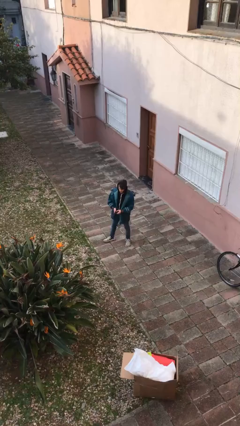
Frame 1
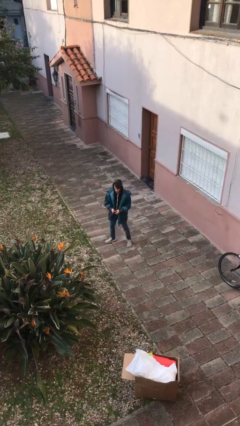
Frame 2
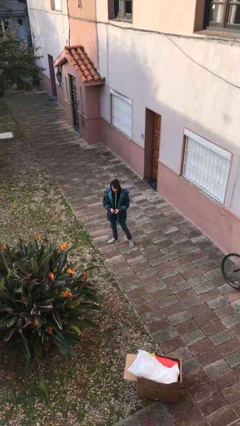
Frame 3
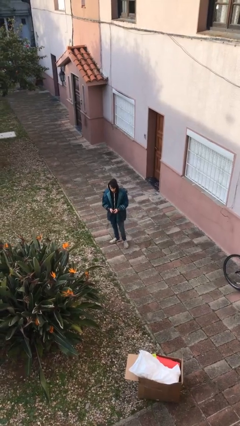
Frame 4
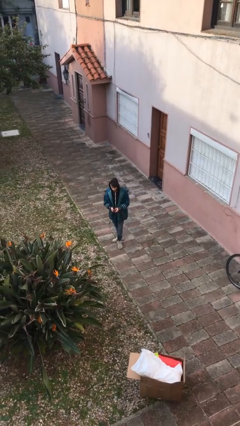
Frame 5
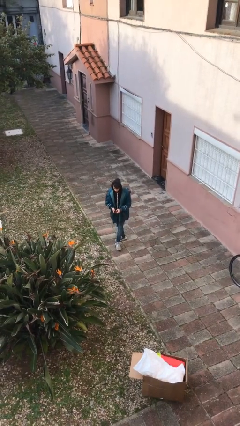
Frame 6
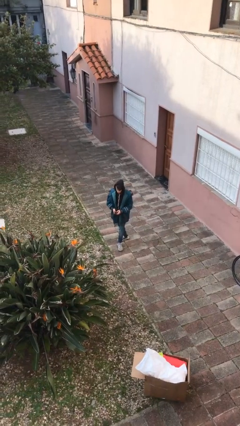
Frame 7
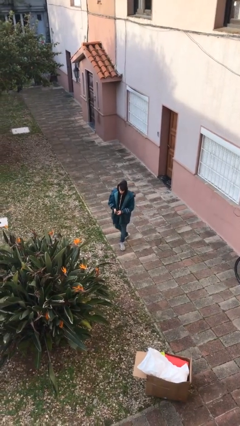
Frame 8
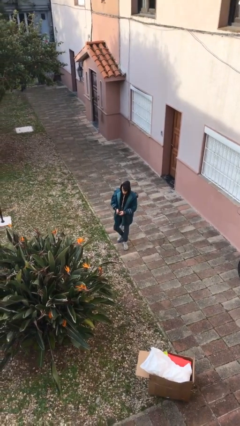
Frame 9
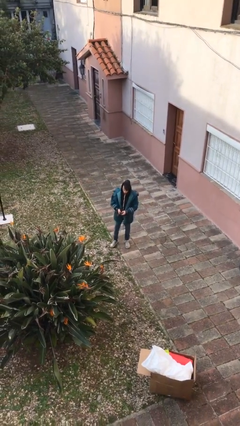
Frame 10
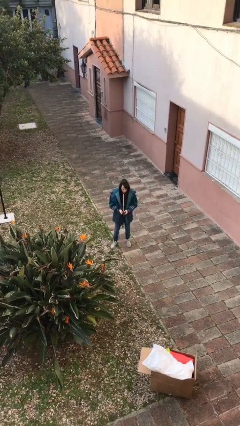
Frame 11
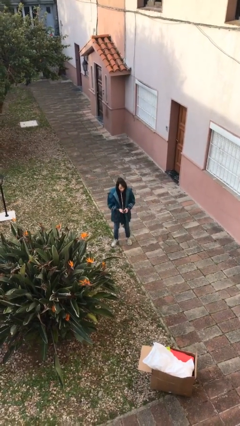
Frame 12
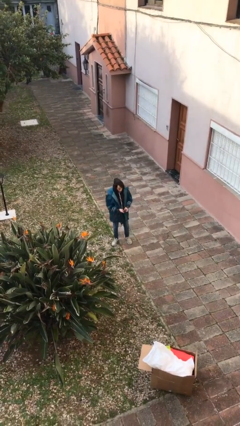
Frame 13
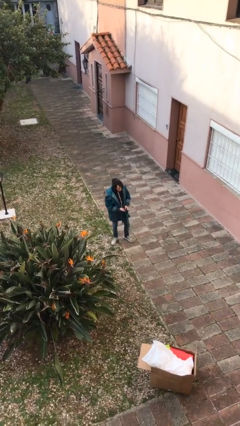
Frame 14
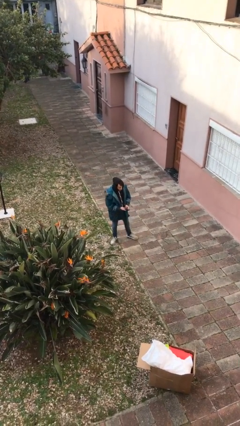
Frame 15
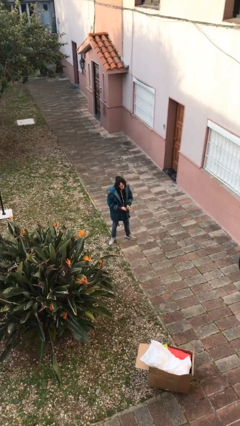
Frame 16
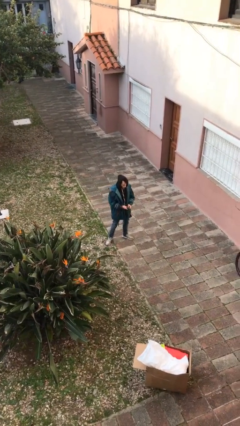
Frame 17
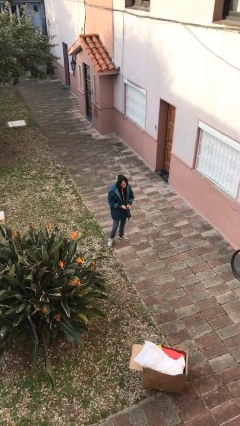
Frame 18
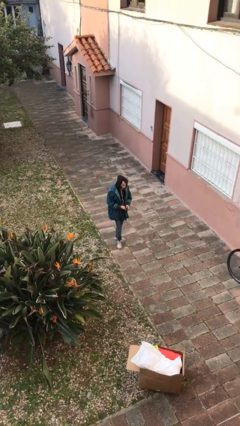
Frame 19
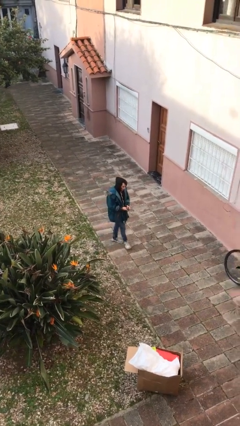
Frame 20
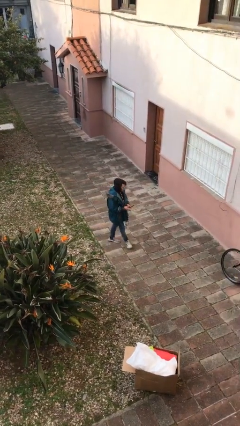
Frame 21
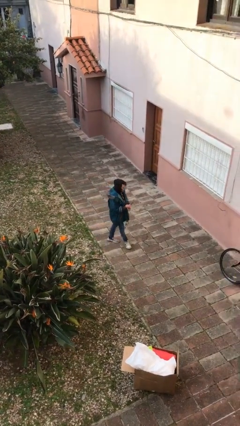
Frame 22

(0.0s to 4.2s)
person texts on phone

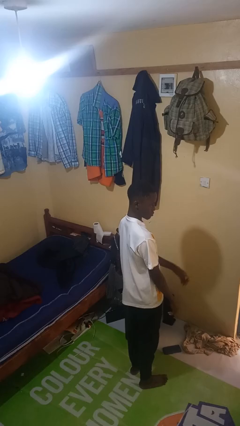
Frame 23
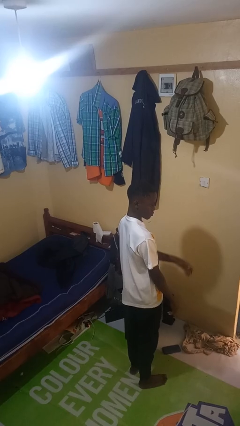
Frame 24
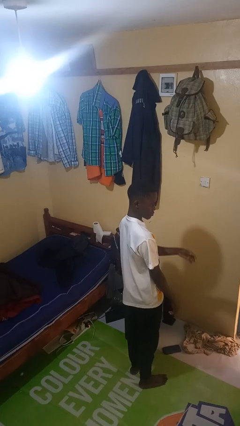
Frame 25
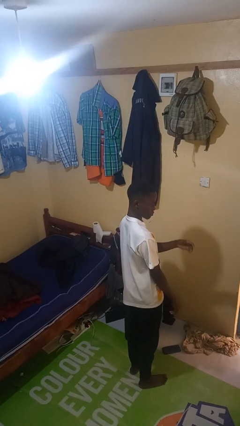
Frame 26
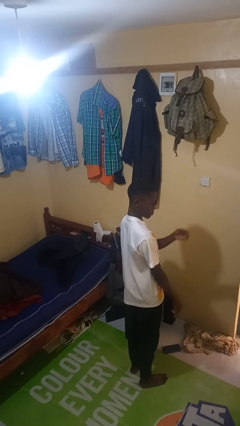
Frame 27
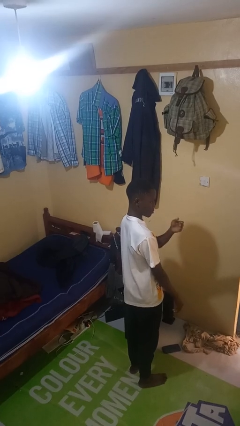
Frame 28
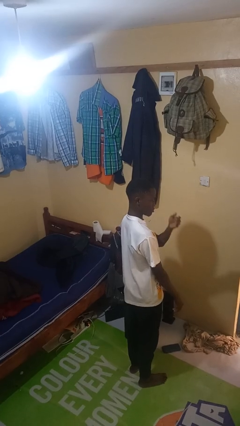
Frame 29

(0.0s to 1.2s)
person swats bug

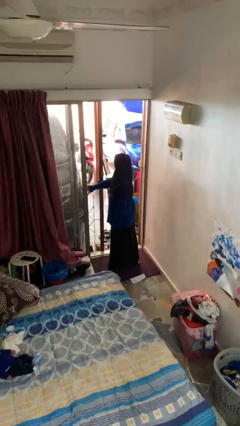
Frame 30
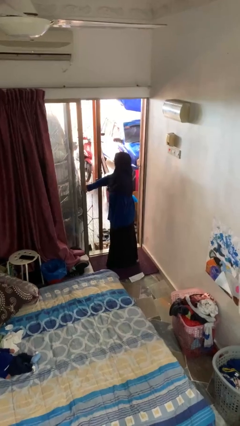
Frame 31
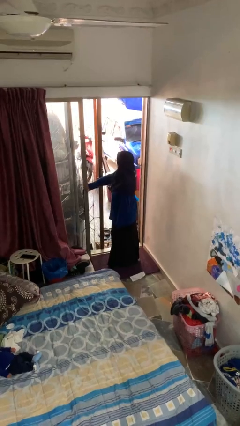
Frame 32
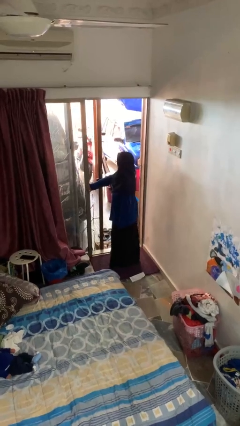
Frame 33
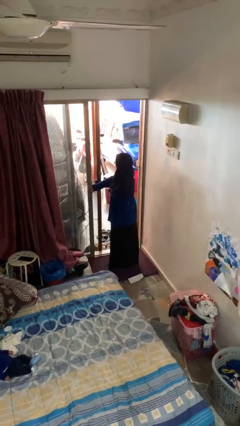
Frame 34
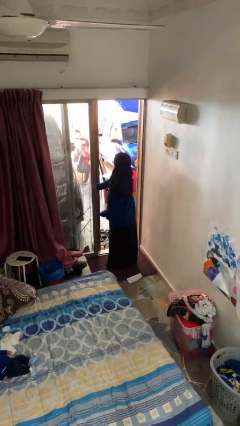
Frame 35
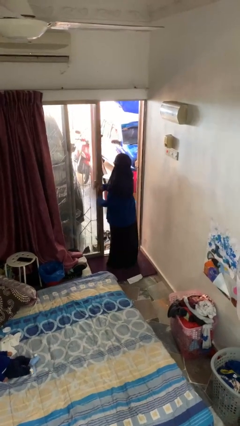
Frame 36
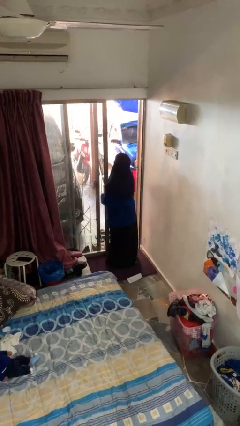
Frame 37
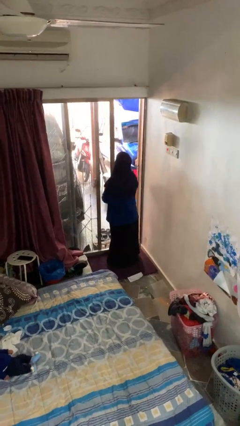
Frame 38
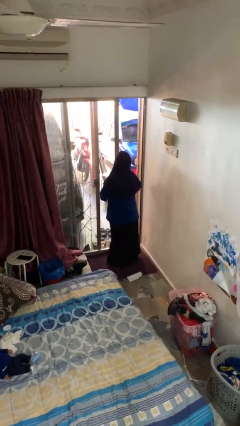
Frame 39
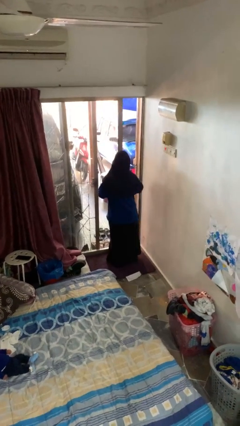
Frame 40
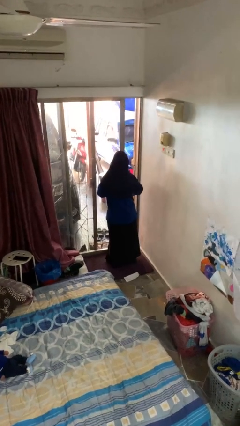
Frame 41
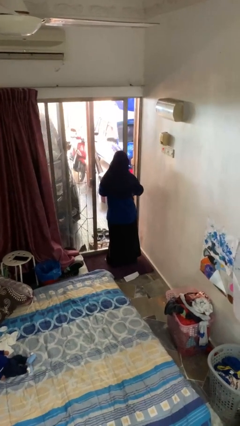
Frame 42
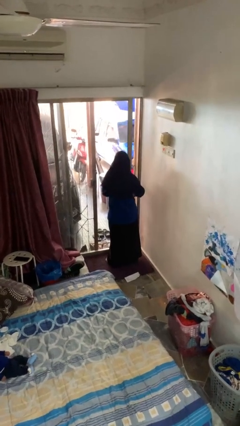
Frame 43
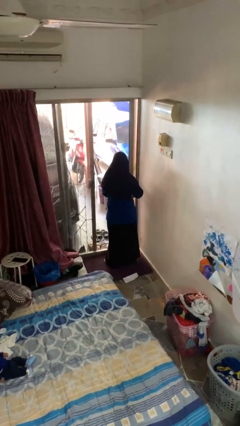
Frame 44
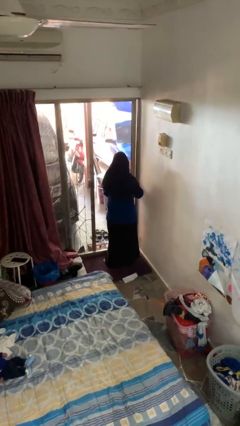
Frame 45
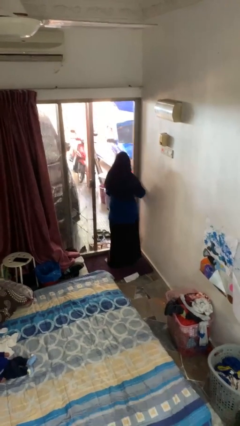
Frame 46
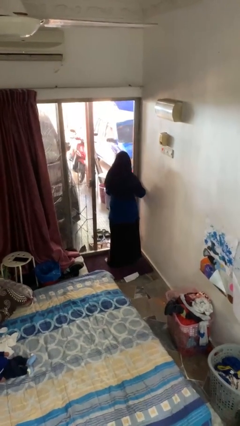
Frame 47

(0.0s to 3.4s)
person closes sliding door

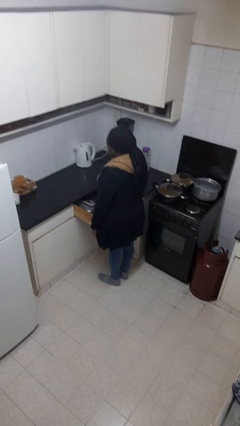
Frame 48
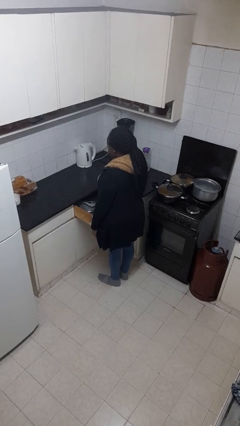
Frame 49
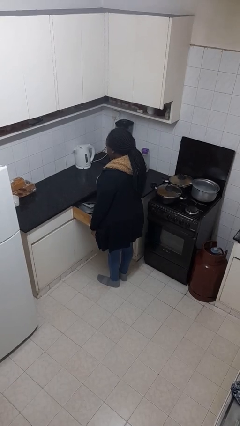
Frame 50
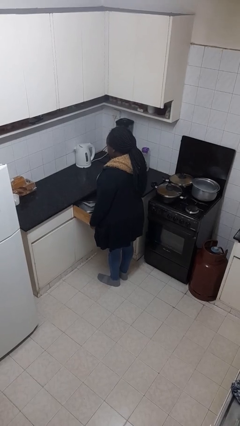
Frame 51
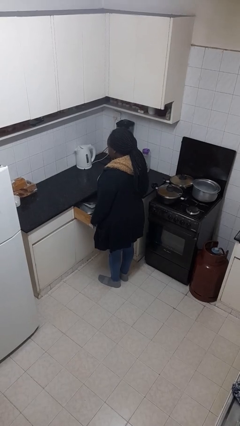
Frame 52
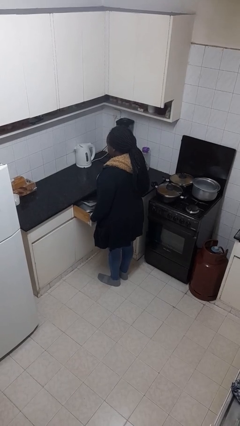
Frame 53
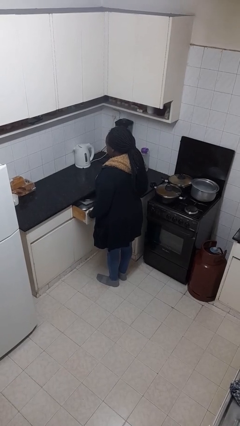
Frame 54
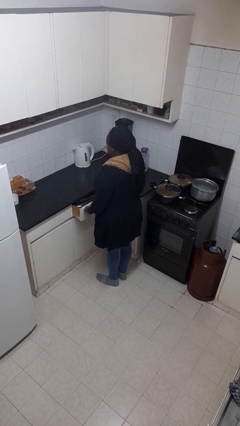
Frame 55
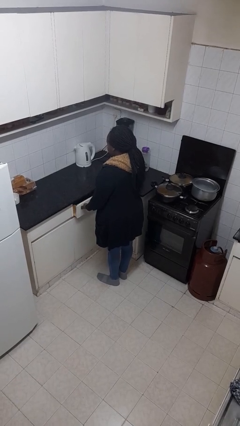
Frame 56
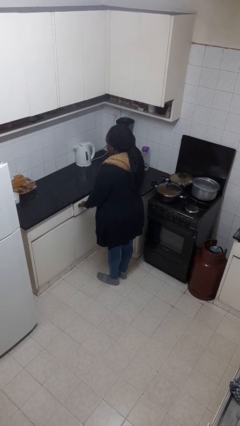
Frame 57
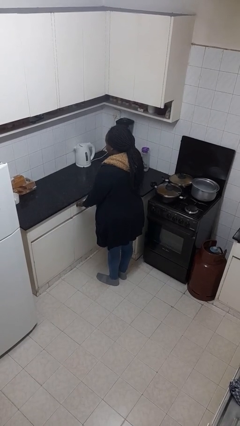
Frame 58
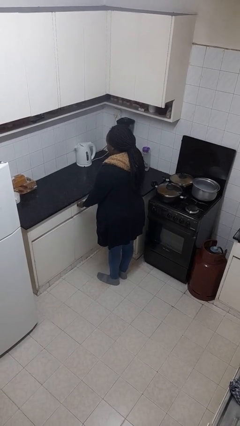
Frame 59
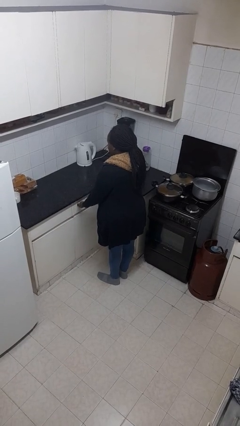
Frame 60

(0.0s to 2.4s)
person closes kitchen drawer

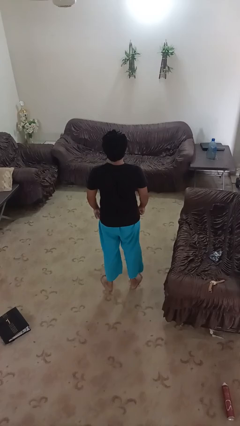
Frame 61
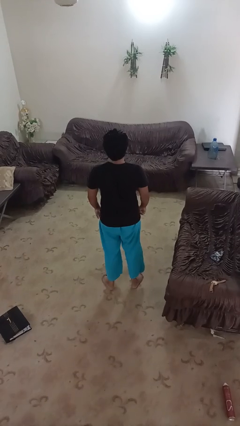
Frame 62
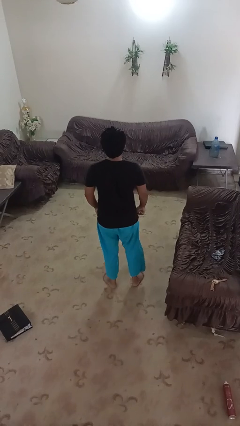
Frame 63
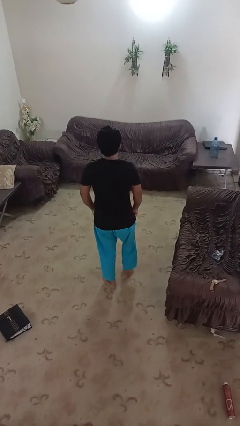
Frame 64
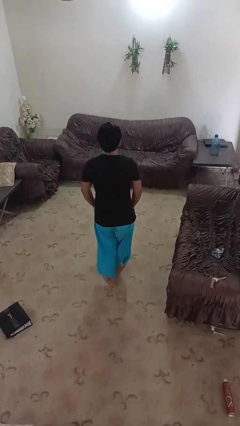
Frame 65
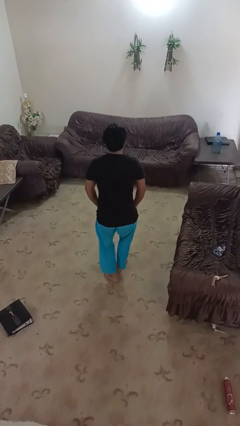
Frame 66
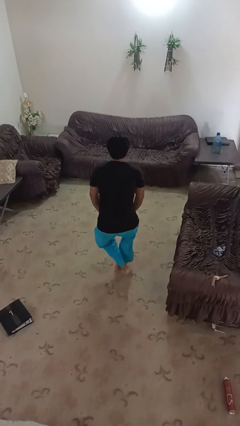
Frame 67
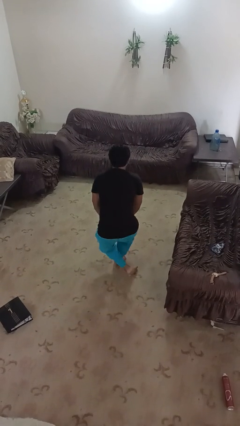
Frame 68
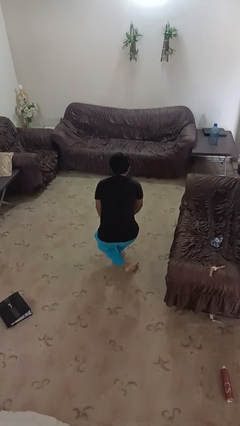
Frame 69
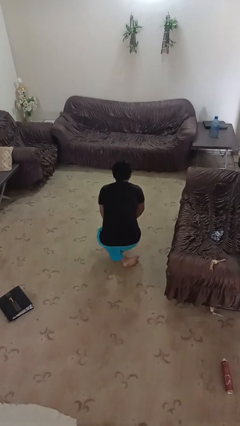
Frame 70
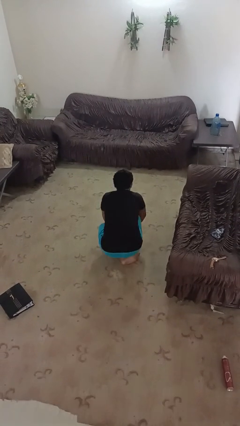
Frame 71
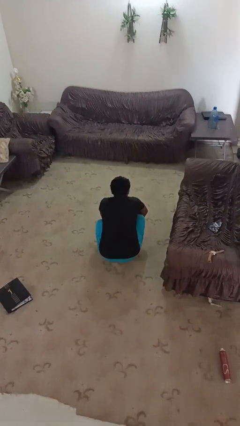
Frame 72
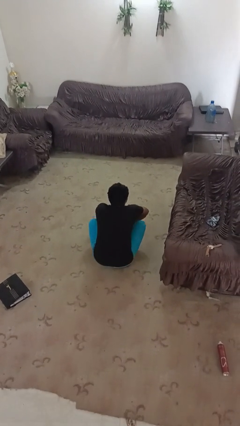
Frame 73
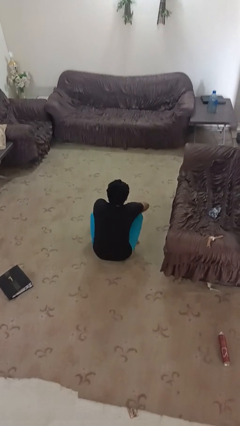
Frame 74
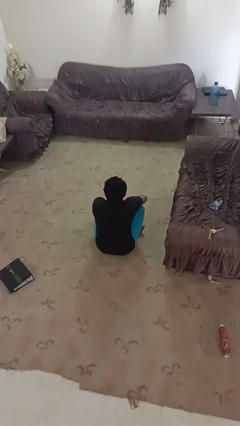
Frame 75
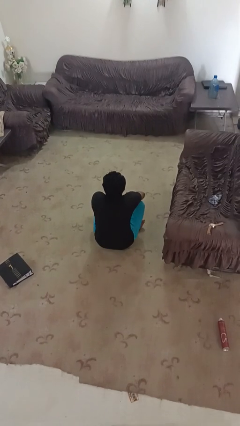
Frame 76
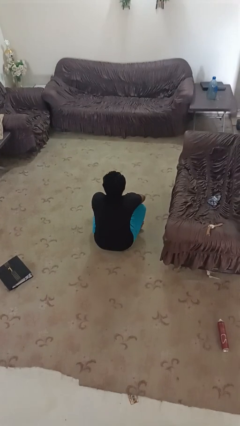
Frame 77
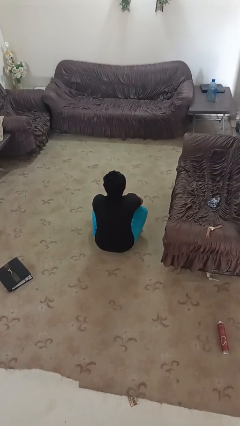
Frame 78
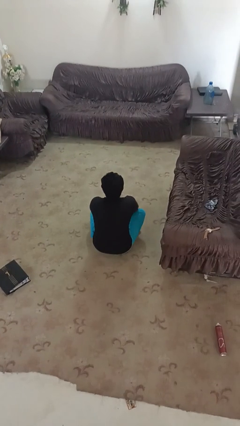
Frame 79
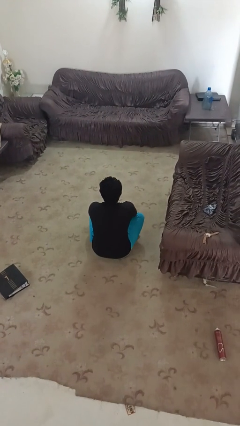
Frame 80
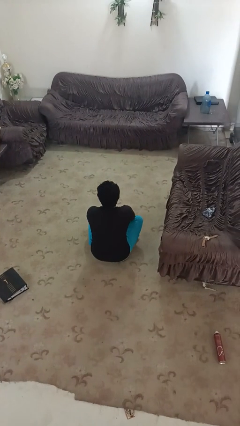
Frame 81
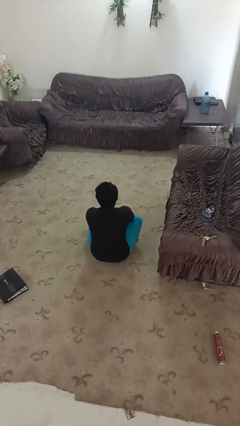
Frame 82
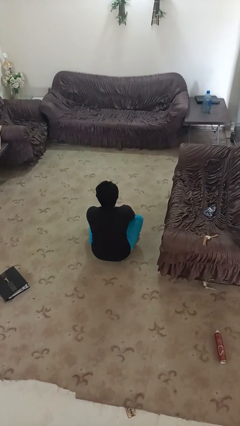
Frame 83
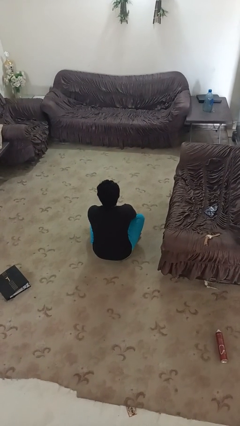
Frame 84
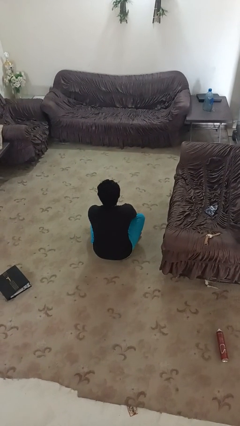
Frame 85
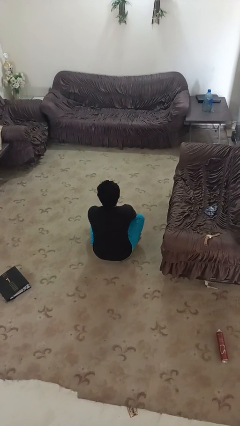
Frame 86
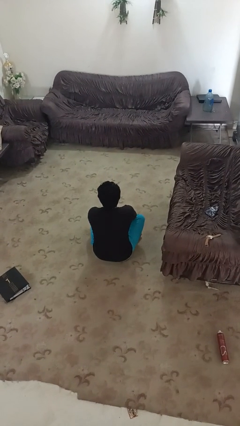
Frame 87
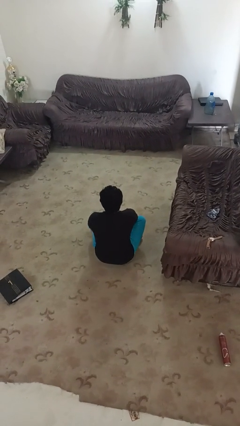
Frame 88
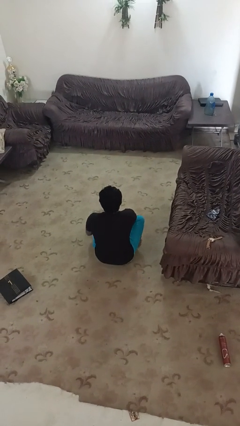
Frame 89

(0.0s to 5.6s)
person sits crisscross

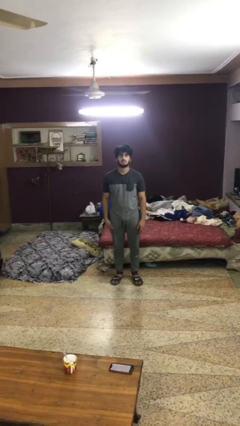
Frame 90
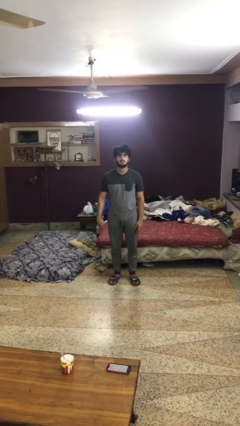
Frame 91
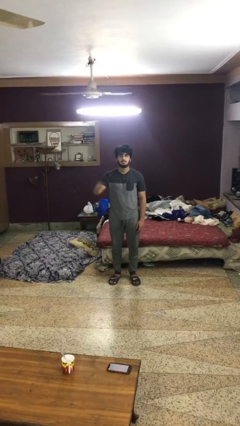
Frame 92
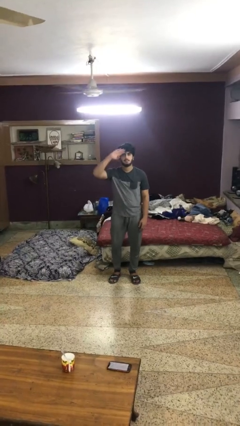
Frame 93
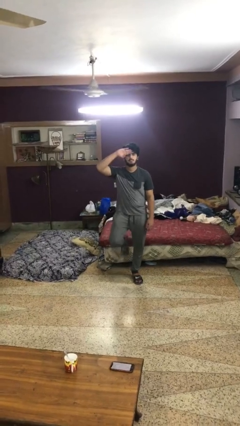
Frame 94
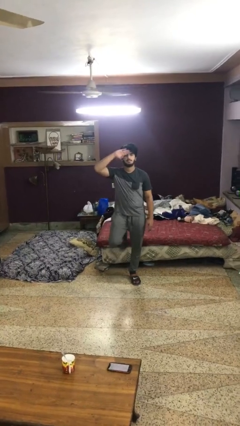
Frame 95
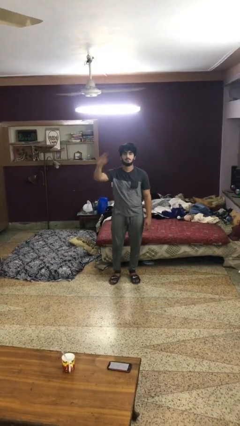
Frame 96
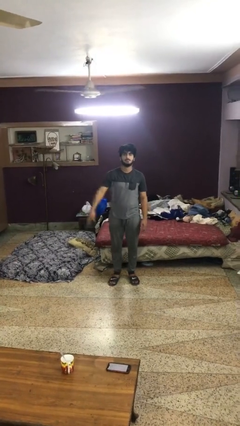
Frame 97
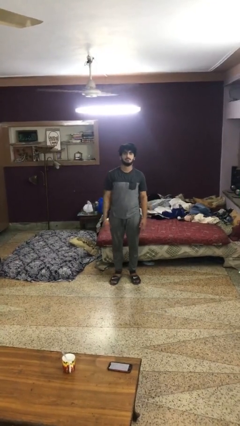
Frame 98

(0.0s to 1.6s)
person salutes
